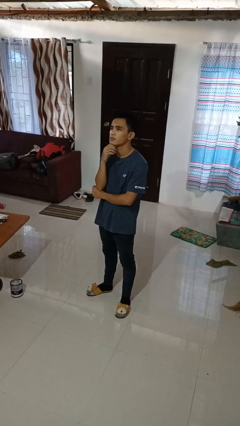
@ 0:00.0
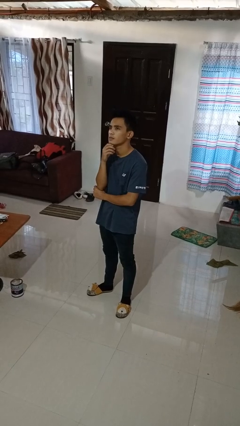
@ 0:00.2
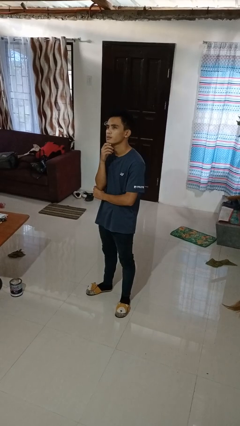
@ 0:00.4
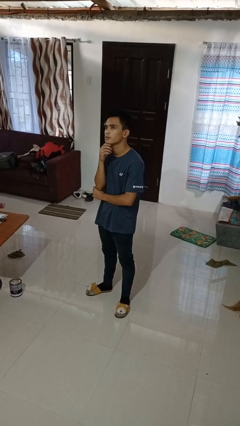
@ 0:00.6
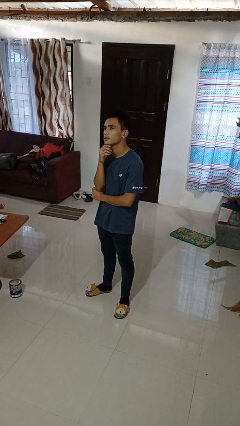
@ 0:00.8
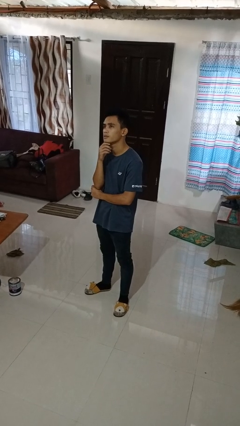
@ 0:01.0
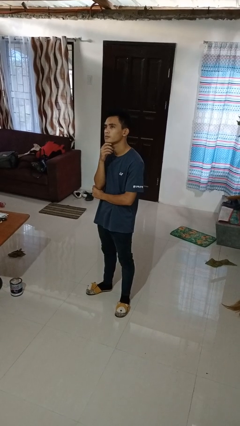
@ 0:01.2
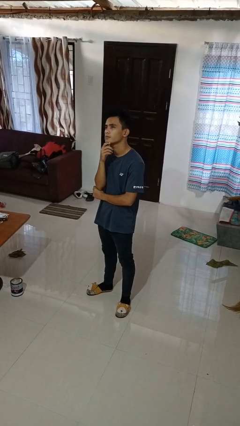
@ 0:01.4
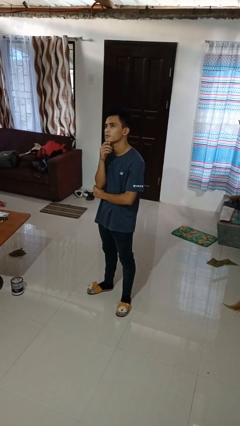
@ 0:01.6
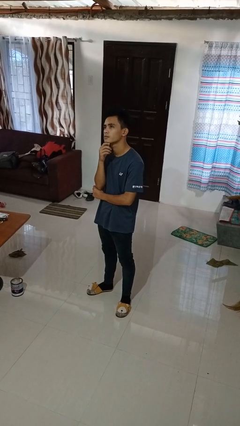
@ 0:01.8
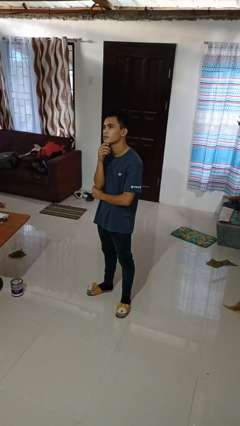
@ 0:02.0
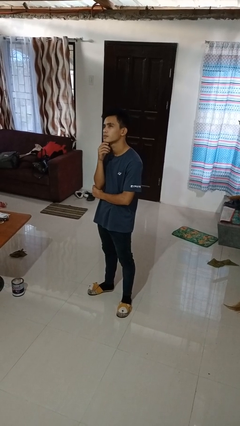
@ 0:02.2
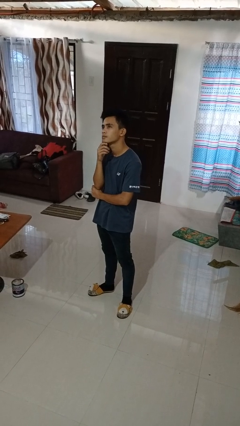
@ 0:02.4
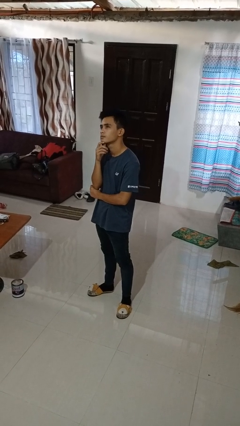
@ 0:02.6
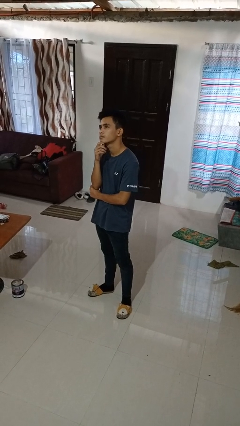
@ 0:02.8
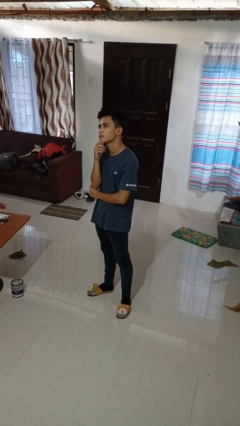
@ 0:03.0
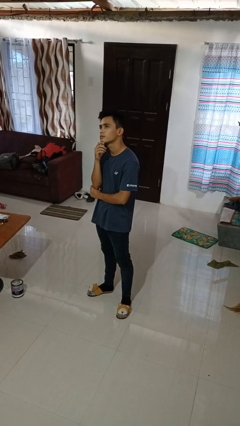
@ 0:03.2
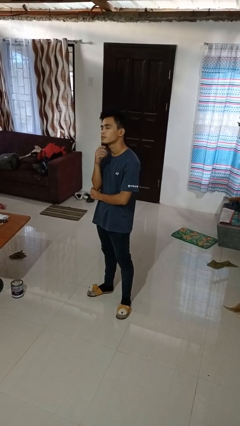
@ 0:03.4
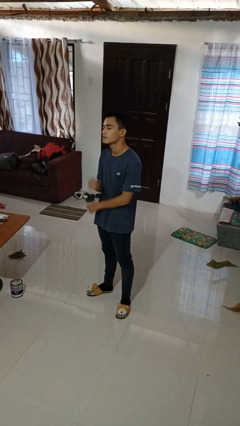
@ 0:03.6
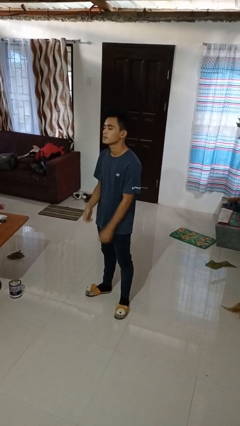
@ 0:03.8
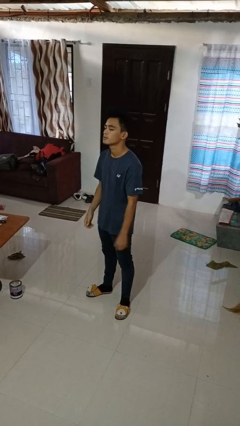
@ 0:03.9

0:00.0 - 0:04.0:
person strokes chin

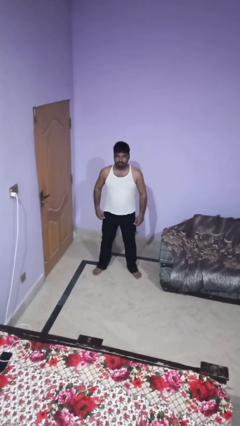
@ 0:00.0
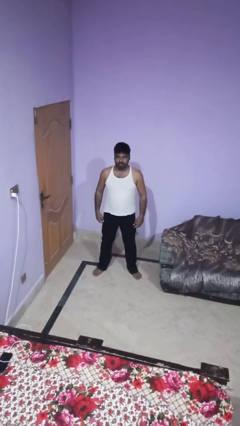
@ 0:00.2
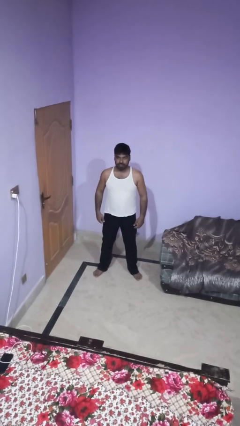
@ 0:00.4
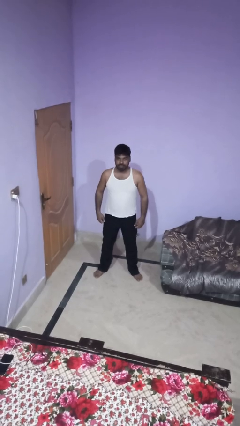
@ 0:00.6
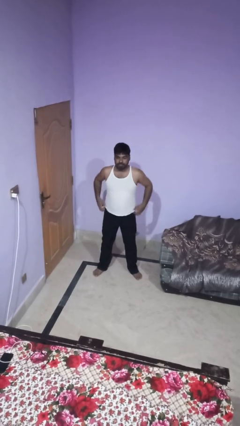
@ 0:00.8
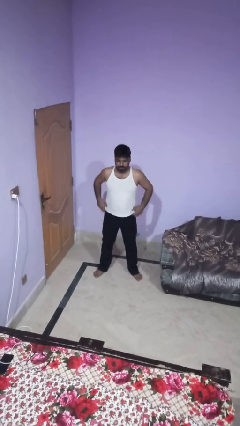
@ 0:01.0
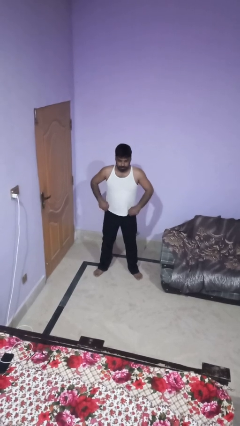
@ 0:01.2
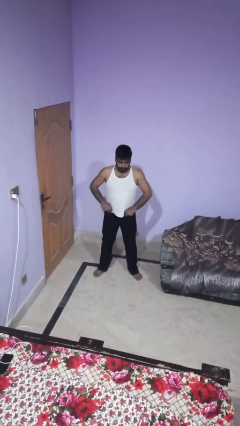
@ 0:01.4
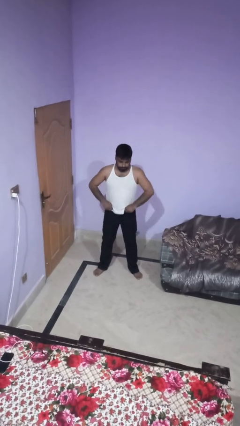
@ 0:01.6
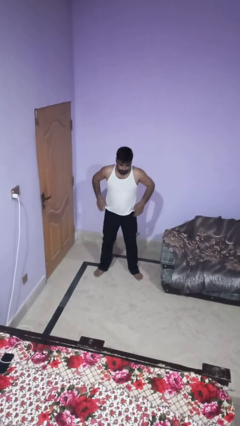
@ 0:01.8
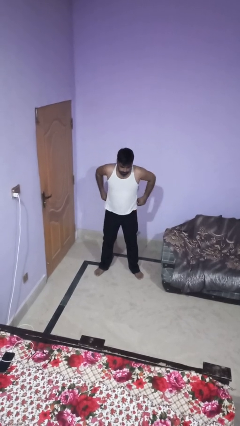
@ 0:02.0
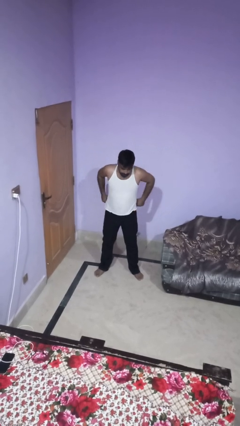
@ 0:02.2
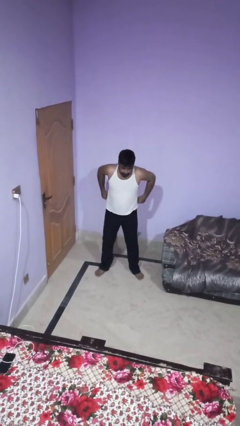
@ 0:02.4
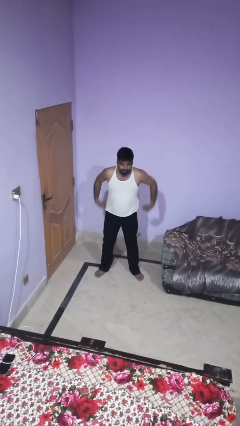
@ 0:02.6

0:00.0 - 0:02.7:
person hikes up pants

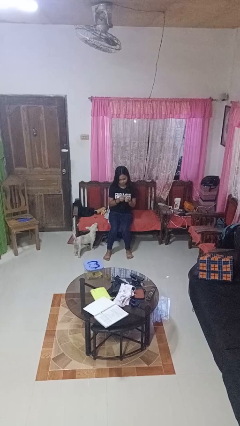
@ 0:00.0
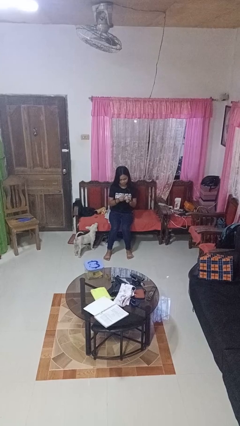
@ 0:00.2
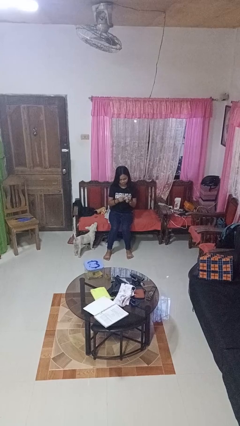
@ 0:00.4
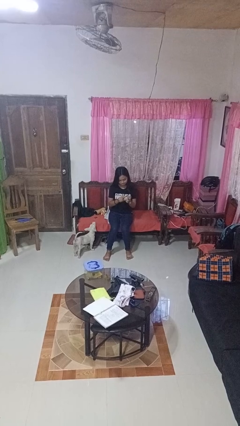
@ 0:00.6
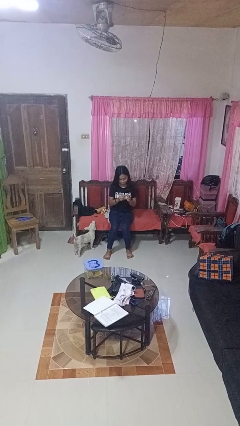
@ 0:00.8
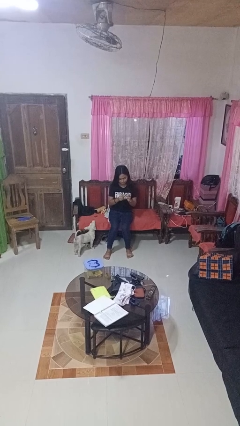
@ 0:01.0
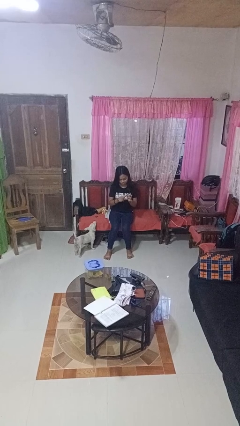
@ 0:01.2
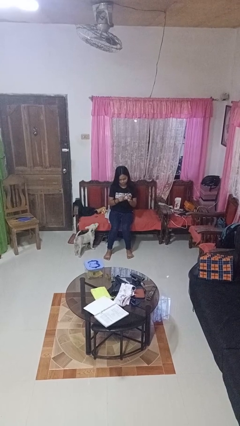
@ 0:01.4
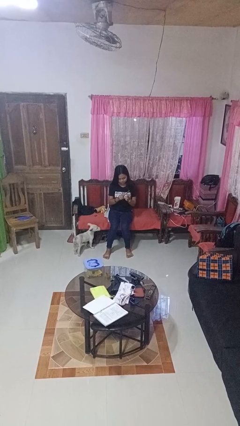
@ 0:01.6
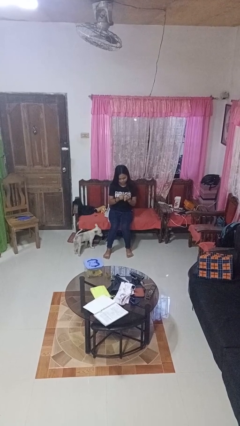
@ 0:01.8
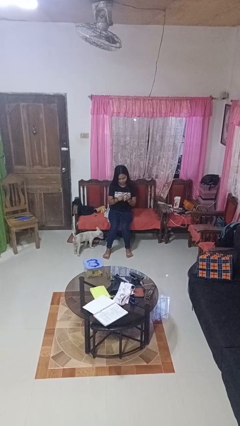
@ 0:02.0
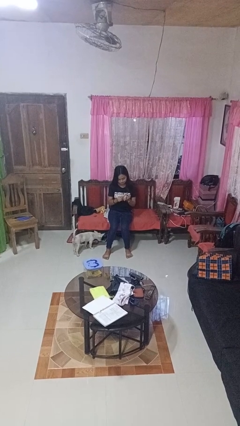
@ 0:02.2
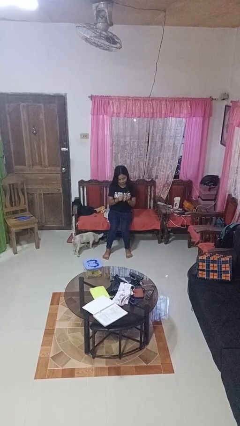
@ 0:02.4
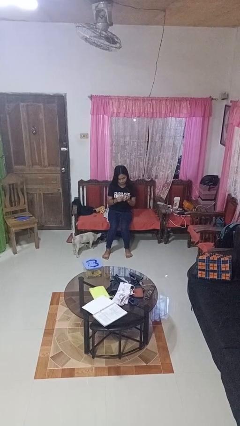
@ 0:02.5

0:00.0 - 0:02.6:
person files fingernails

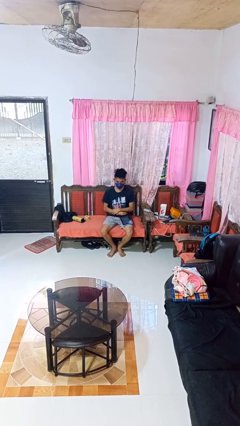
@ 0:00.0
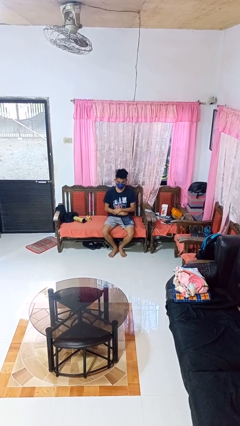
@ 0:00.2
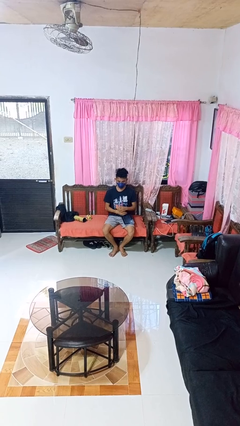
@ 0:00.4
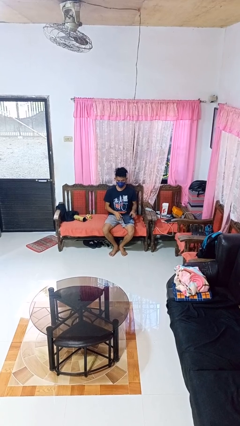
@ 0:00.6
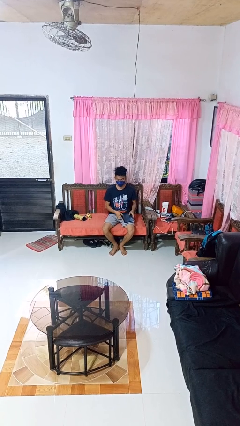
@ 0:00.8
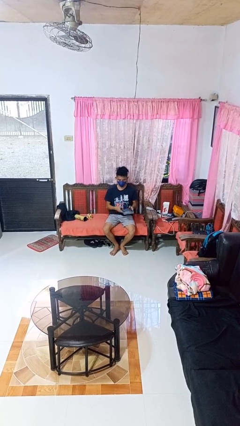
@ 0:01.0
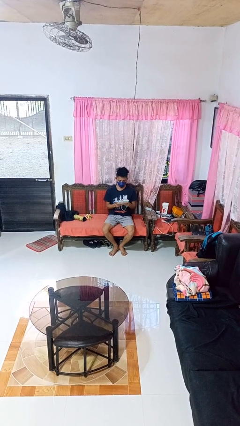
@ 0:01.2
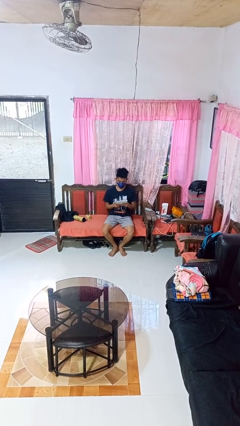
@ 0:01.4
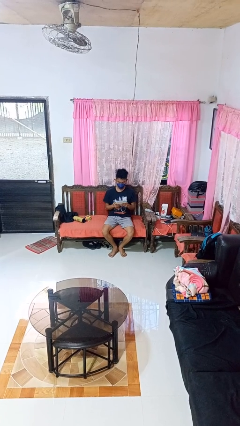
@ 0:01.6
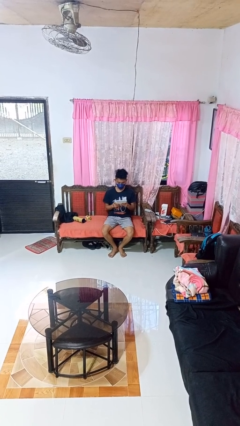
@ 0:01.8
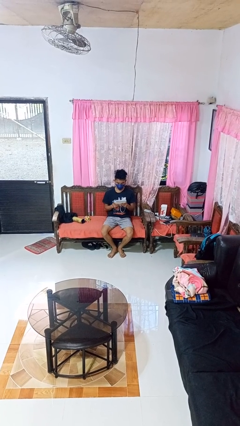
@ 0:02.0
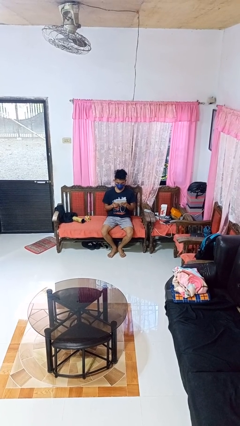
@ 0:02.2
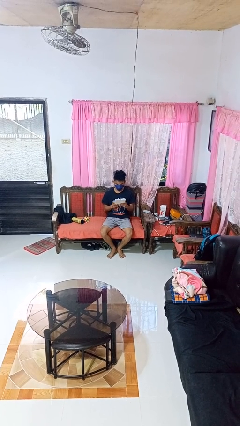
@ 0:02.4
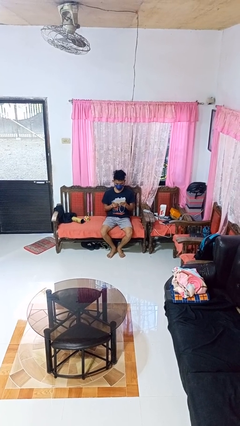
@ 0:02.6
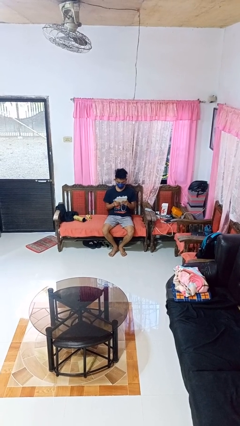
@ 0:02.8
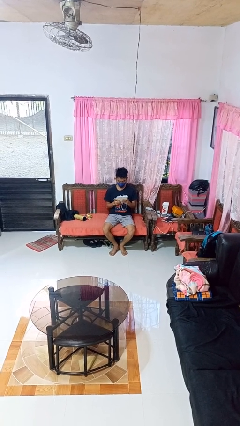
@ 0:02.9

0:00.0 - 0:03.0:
person interacts with tablet

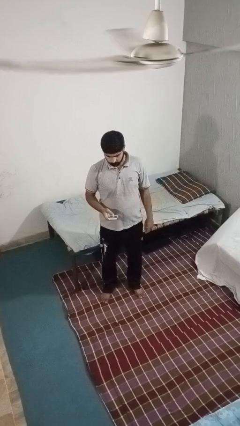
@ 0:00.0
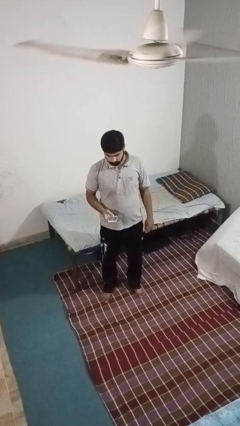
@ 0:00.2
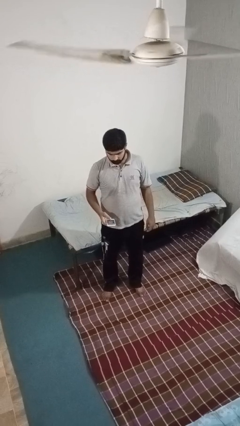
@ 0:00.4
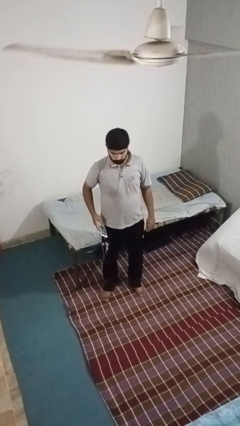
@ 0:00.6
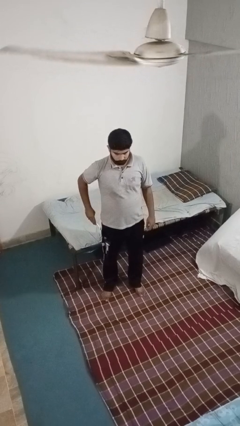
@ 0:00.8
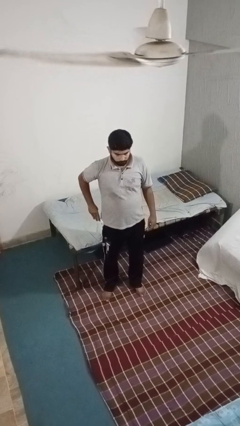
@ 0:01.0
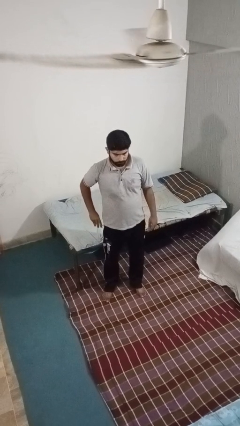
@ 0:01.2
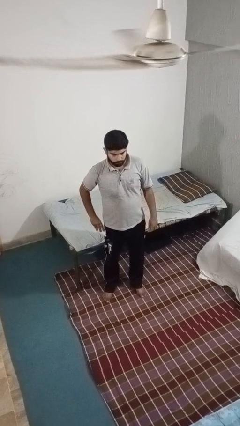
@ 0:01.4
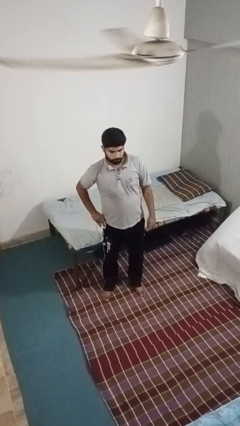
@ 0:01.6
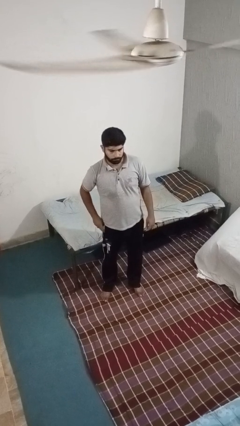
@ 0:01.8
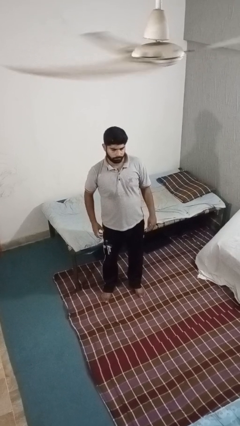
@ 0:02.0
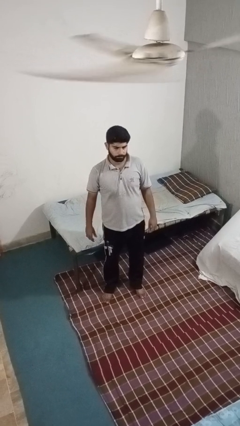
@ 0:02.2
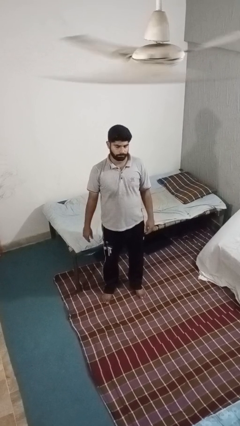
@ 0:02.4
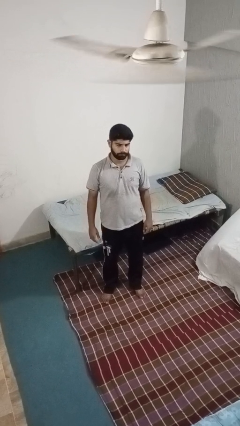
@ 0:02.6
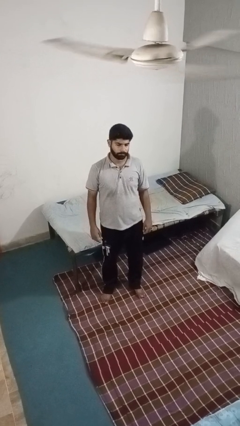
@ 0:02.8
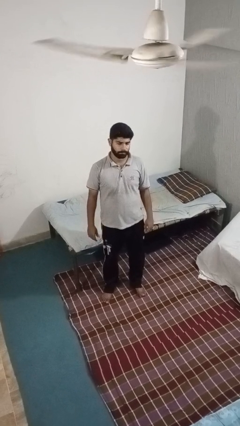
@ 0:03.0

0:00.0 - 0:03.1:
person puts phone into pocket

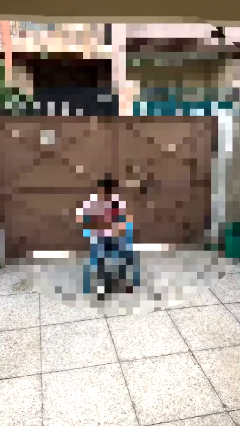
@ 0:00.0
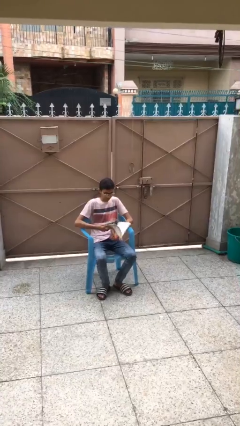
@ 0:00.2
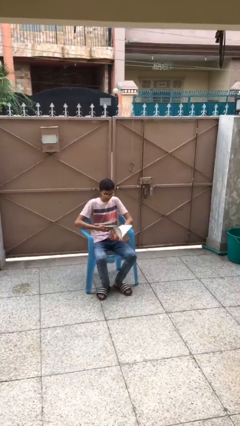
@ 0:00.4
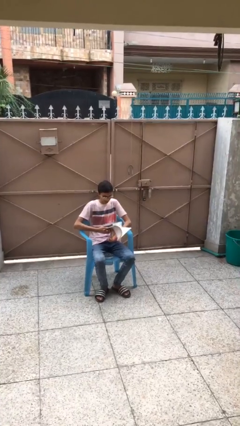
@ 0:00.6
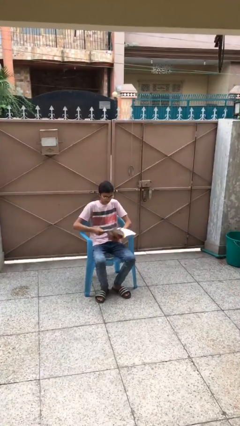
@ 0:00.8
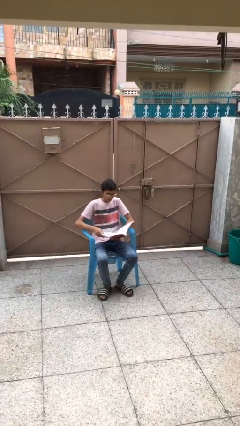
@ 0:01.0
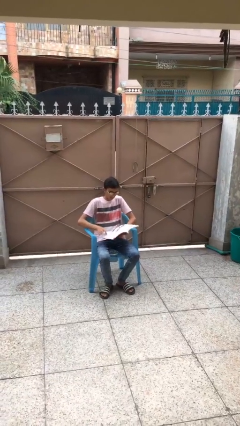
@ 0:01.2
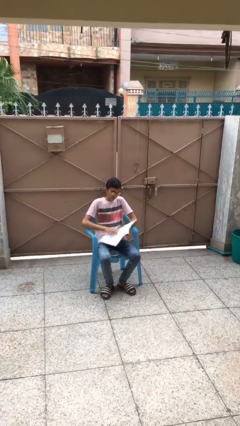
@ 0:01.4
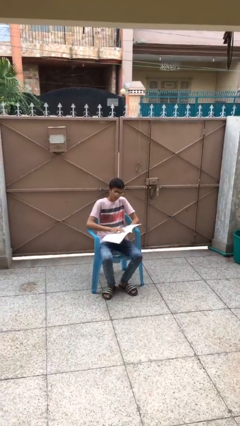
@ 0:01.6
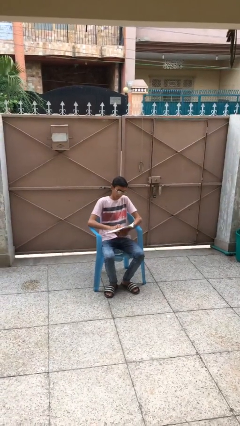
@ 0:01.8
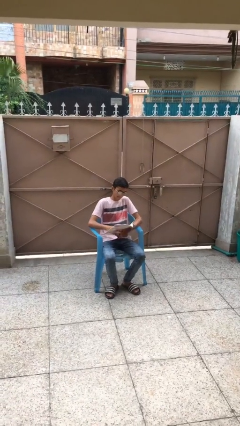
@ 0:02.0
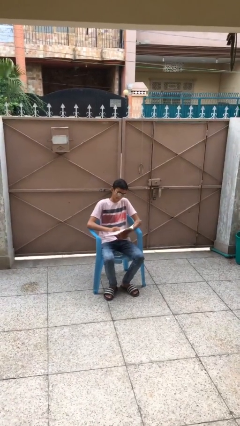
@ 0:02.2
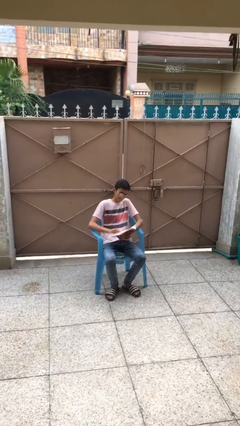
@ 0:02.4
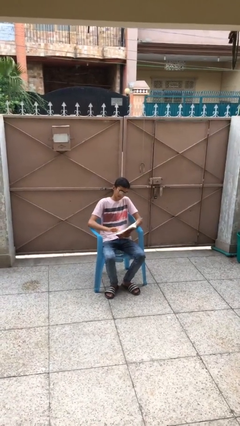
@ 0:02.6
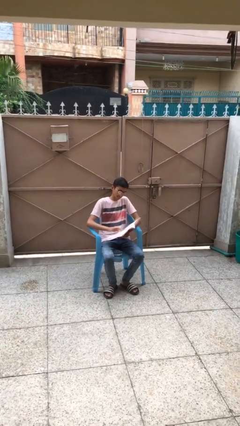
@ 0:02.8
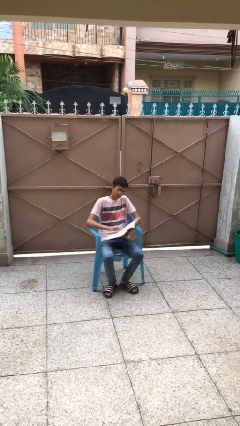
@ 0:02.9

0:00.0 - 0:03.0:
person reads document
